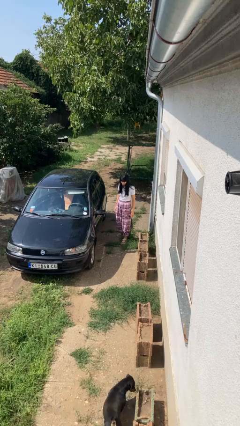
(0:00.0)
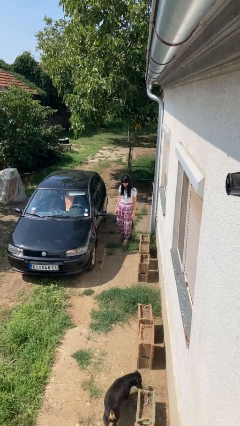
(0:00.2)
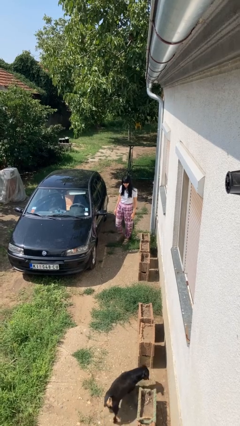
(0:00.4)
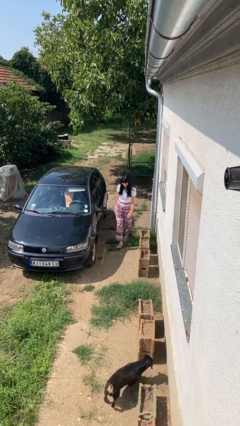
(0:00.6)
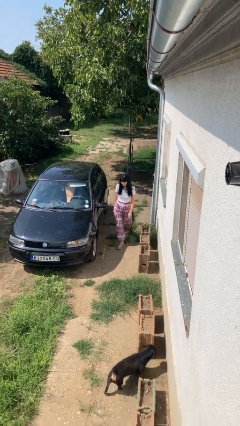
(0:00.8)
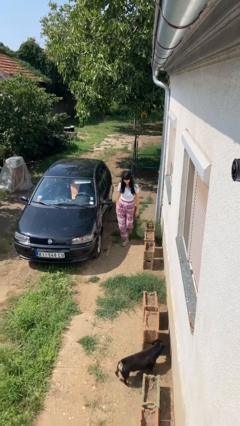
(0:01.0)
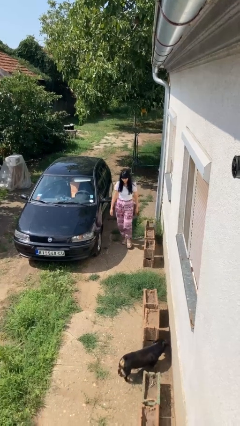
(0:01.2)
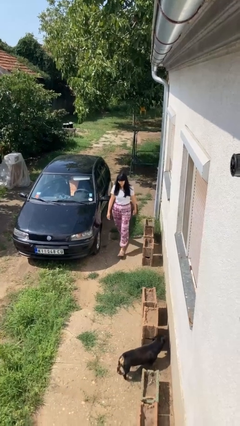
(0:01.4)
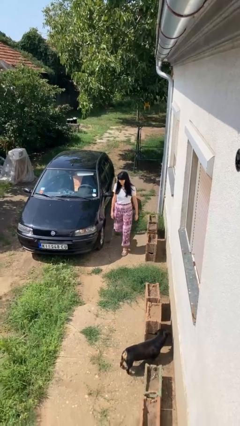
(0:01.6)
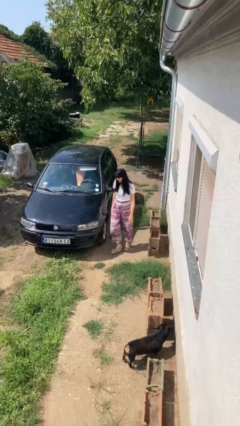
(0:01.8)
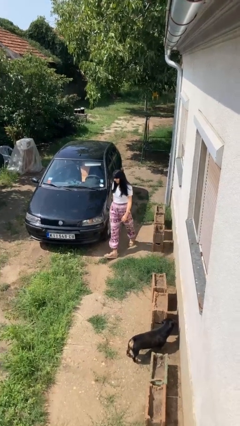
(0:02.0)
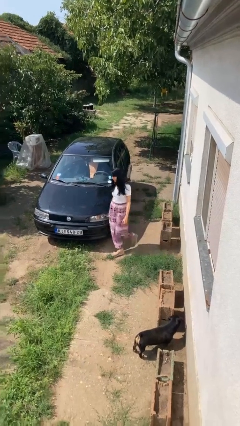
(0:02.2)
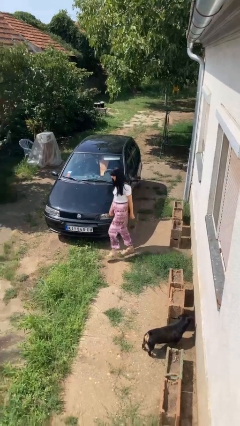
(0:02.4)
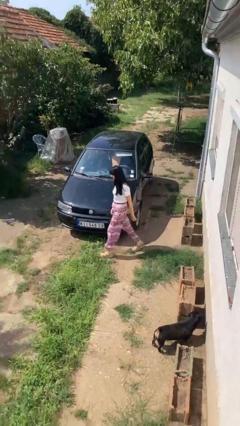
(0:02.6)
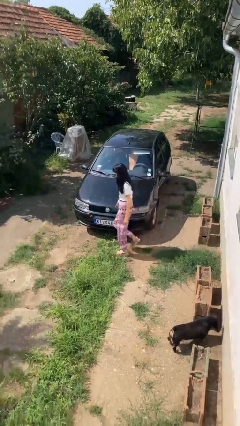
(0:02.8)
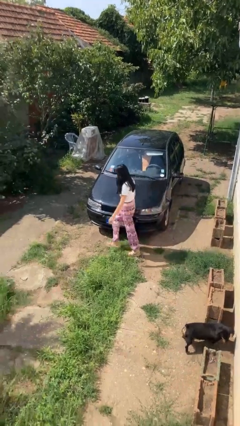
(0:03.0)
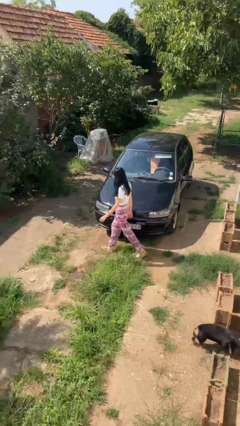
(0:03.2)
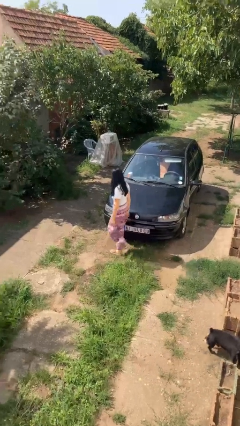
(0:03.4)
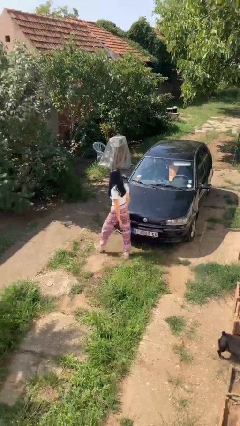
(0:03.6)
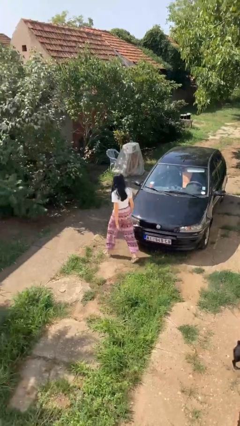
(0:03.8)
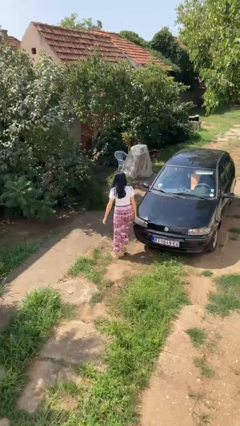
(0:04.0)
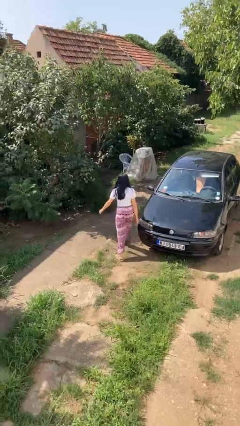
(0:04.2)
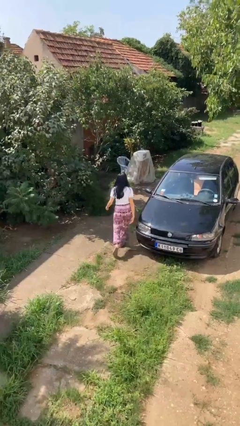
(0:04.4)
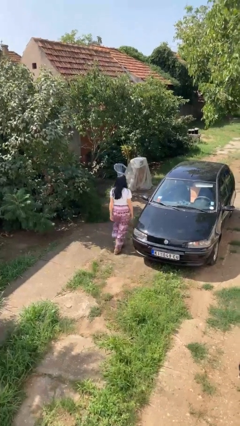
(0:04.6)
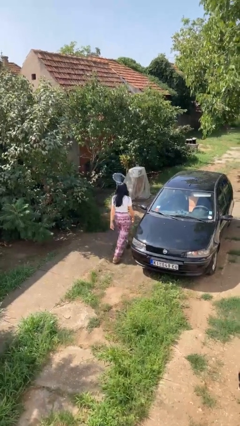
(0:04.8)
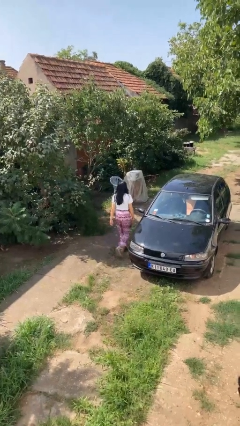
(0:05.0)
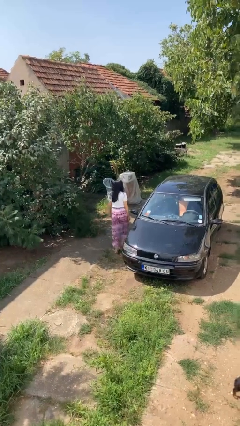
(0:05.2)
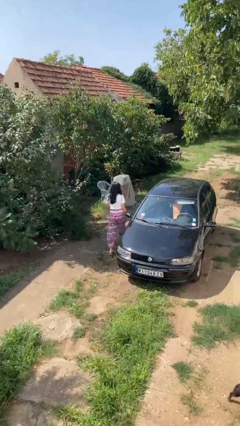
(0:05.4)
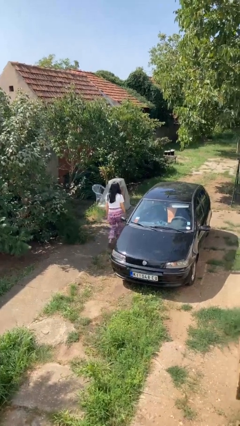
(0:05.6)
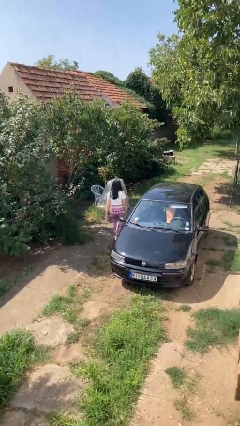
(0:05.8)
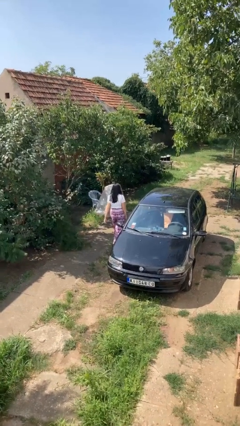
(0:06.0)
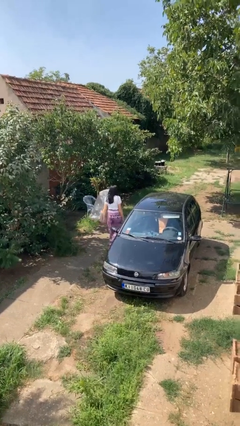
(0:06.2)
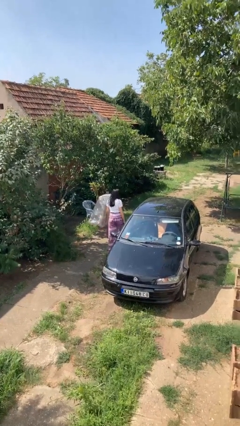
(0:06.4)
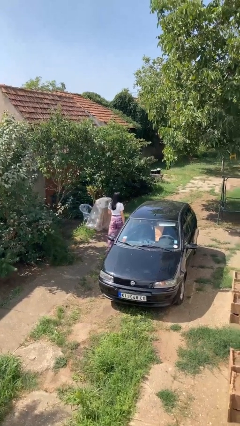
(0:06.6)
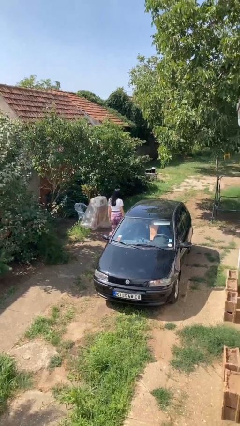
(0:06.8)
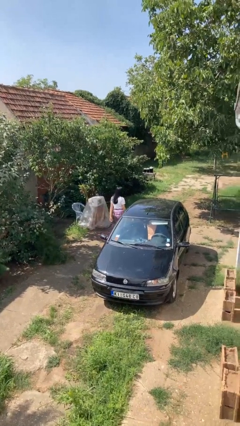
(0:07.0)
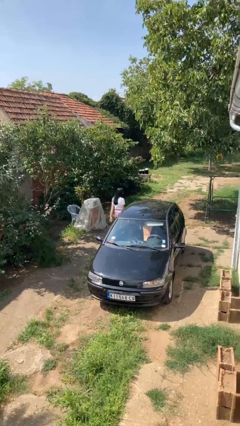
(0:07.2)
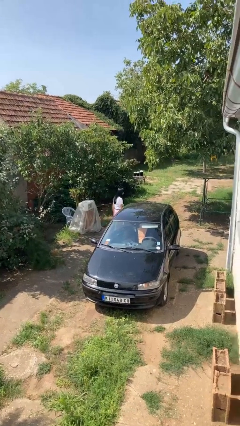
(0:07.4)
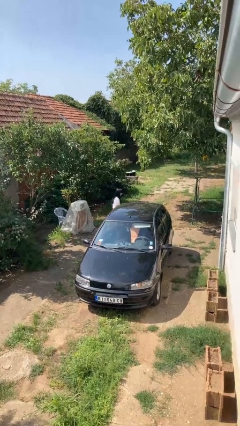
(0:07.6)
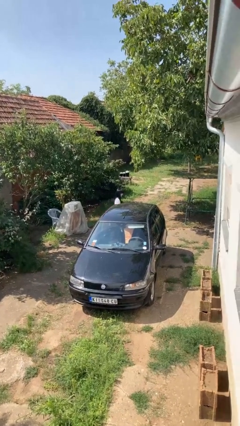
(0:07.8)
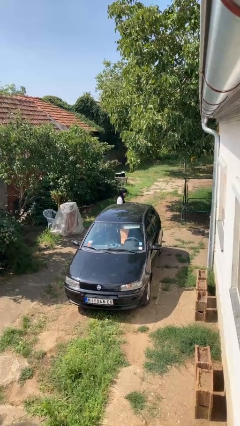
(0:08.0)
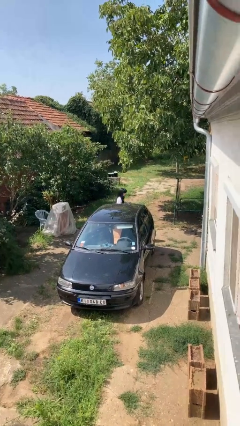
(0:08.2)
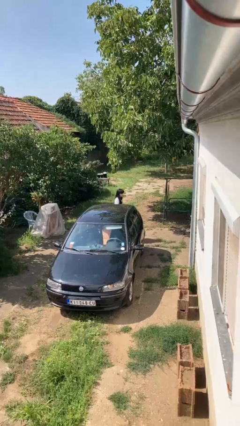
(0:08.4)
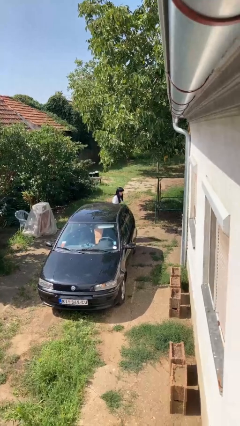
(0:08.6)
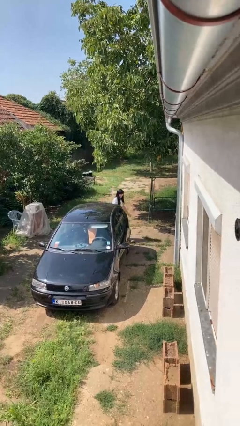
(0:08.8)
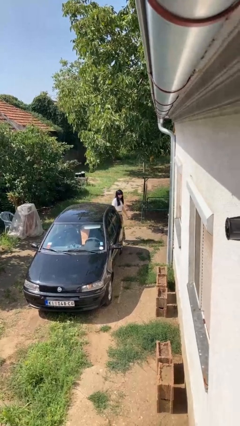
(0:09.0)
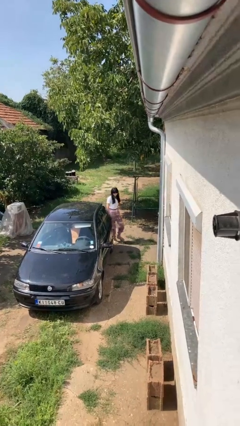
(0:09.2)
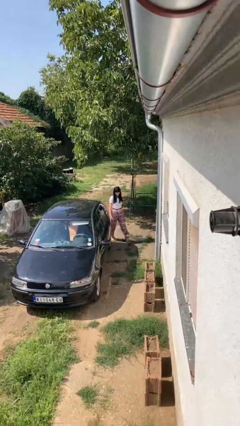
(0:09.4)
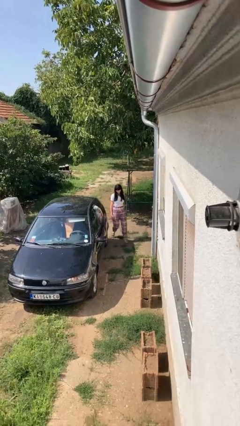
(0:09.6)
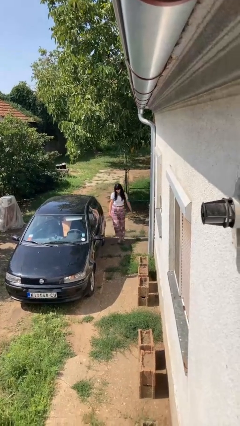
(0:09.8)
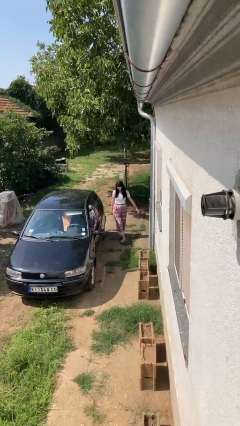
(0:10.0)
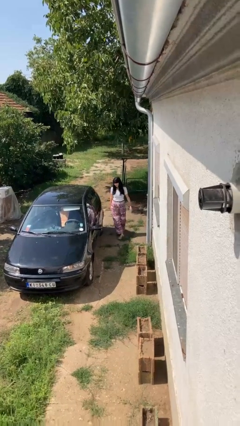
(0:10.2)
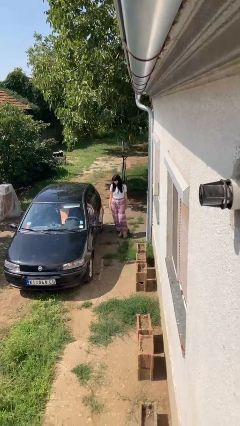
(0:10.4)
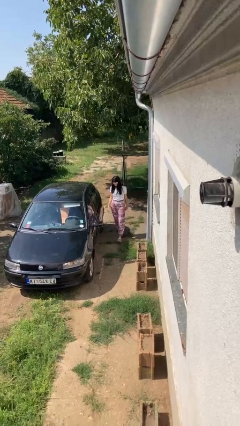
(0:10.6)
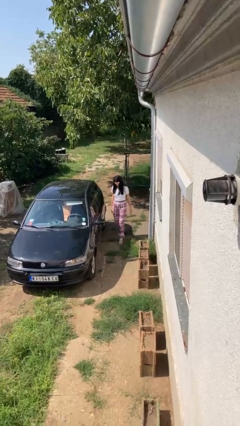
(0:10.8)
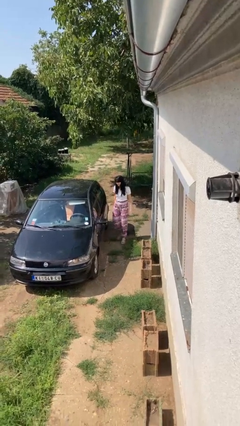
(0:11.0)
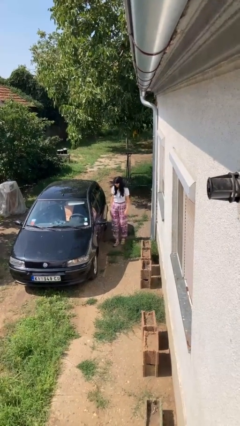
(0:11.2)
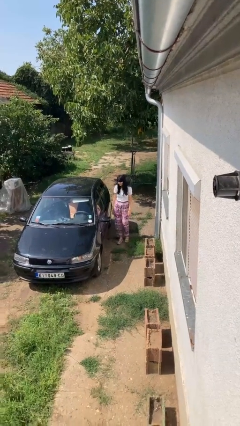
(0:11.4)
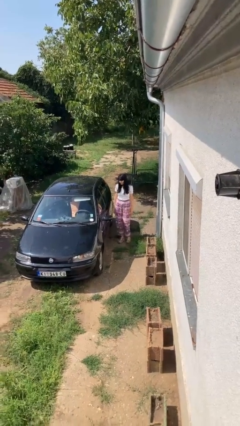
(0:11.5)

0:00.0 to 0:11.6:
person walks around car

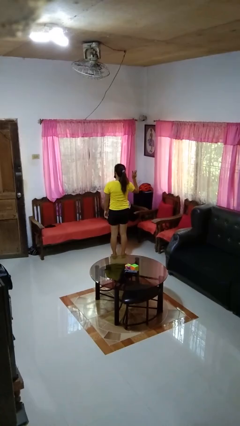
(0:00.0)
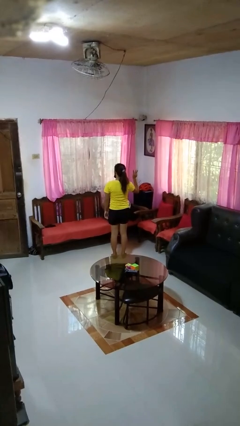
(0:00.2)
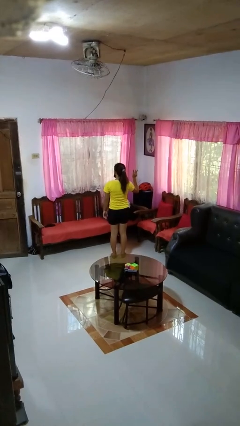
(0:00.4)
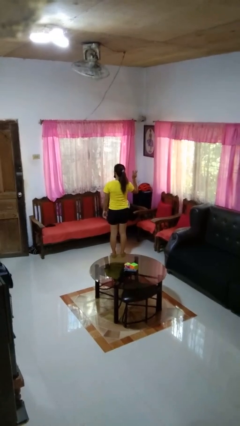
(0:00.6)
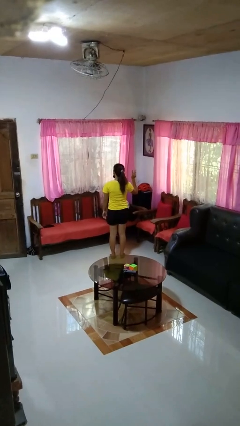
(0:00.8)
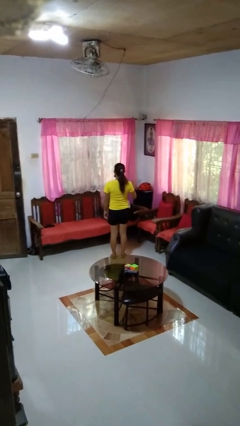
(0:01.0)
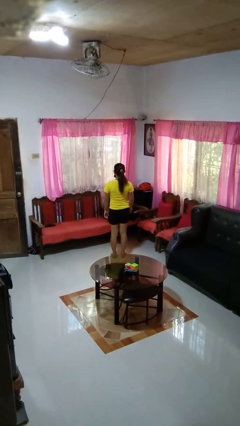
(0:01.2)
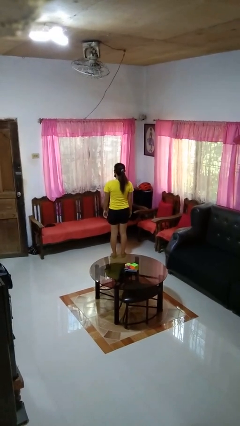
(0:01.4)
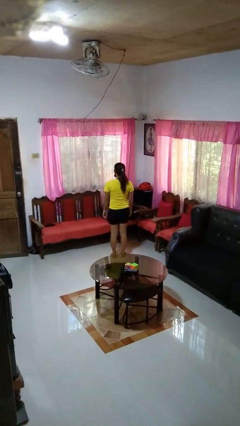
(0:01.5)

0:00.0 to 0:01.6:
person gestures number three

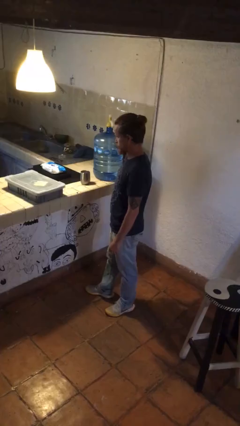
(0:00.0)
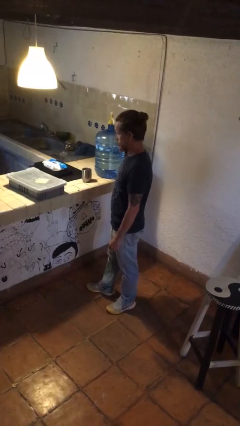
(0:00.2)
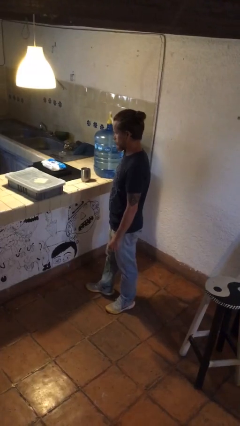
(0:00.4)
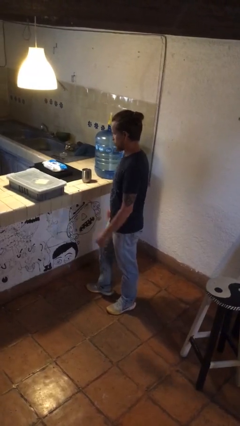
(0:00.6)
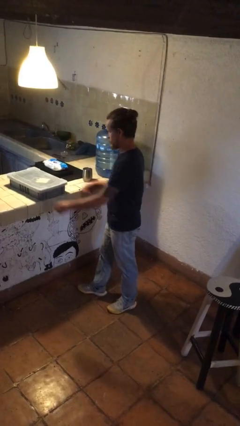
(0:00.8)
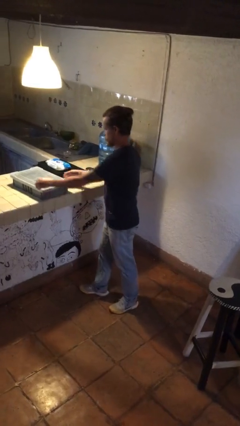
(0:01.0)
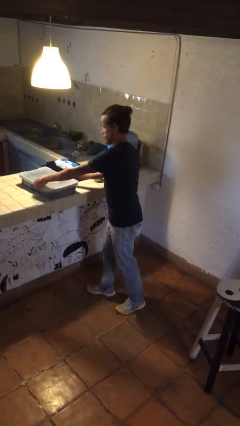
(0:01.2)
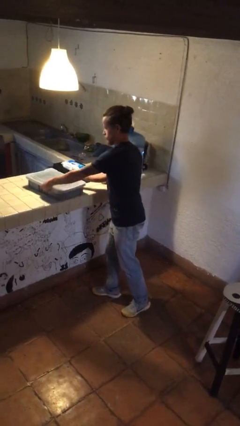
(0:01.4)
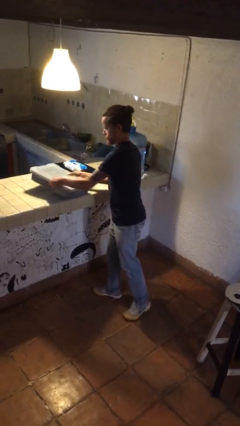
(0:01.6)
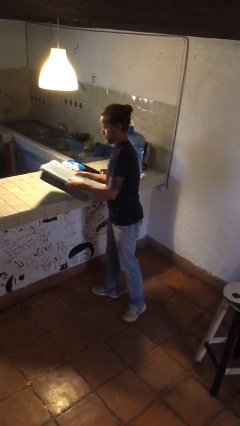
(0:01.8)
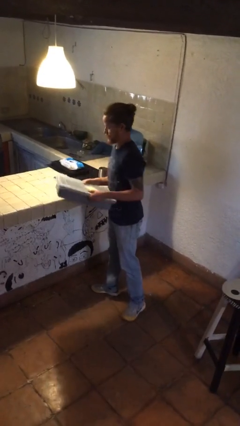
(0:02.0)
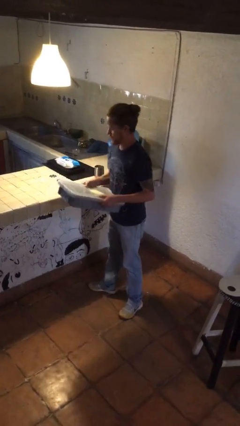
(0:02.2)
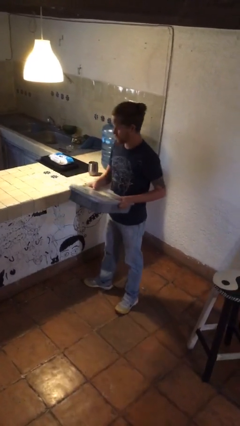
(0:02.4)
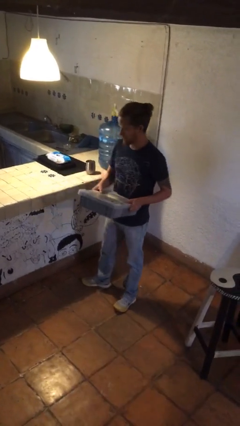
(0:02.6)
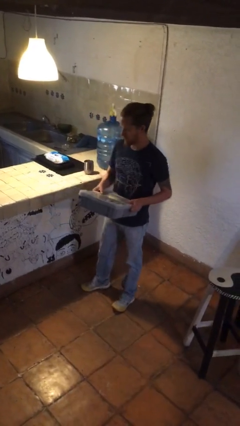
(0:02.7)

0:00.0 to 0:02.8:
person picks up object from countertop

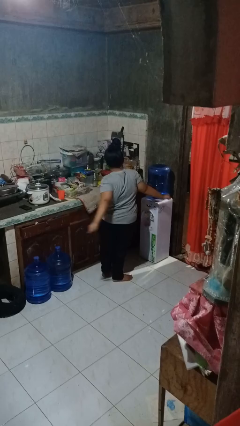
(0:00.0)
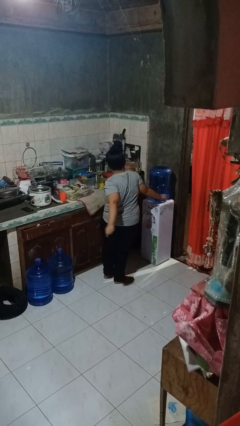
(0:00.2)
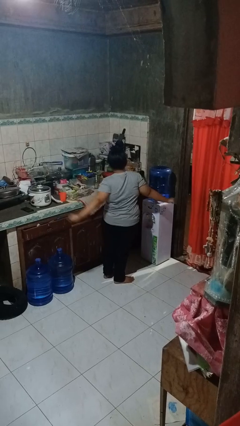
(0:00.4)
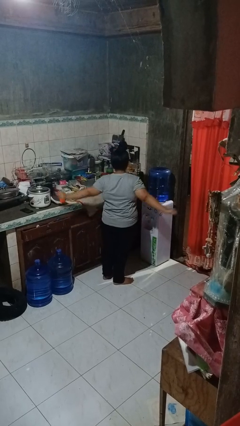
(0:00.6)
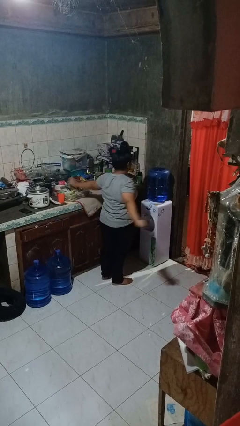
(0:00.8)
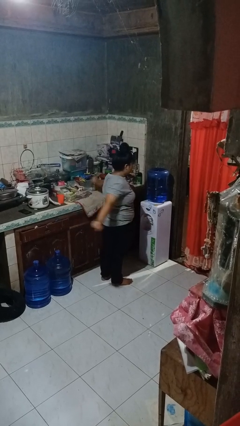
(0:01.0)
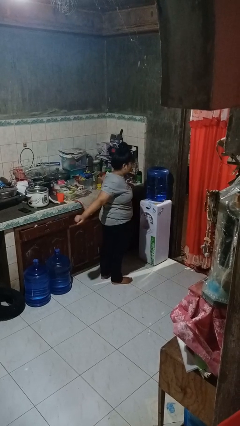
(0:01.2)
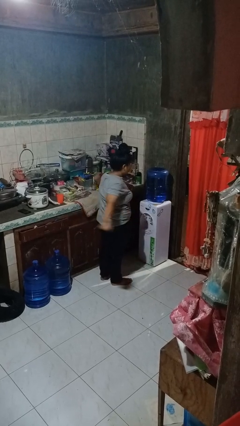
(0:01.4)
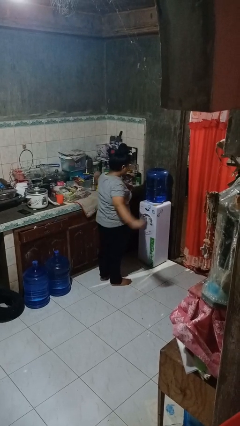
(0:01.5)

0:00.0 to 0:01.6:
person stretches arms to side

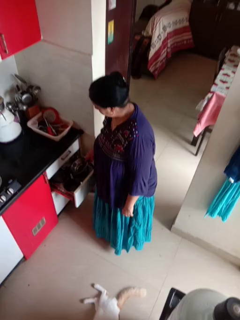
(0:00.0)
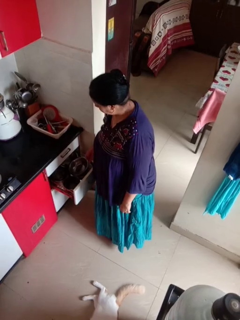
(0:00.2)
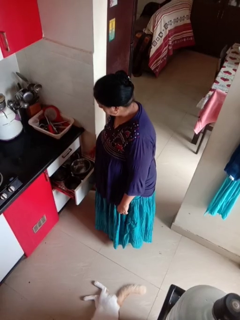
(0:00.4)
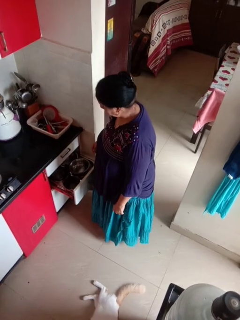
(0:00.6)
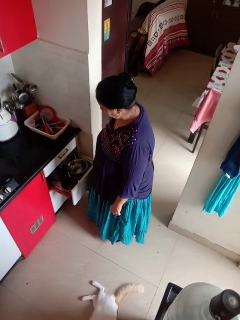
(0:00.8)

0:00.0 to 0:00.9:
person puts object into kitchen drawer
